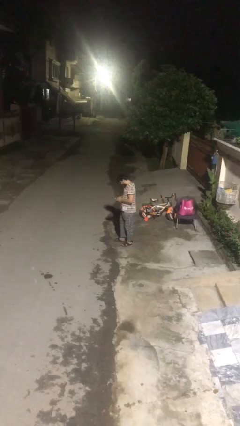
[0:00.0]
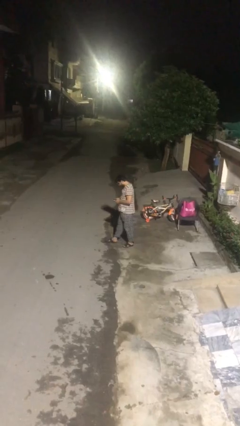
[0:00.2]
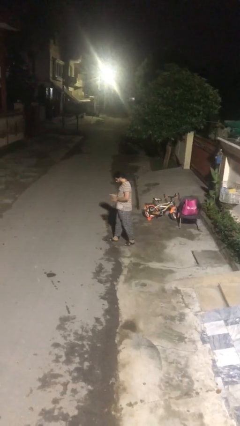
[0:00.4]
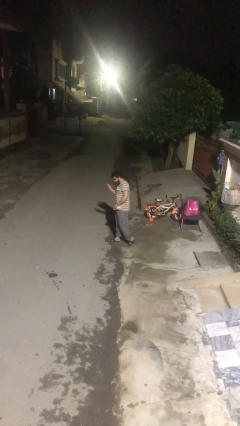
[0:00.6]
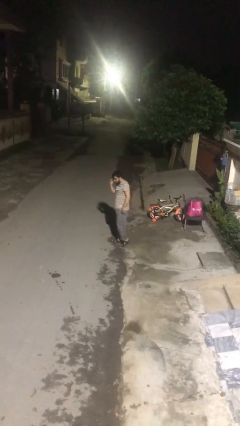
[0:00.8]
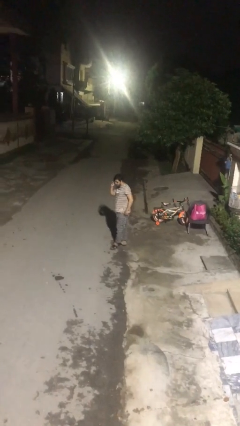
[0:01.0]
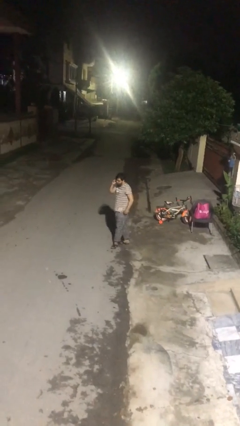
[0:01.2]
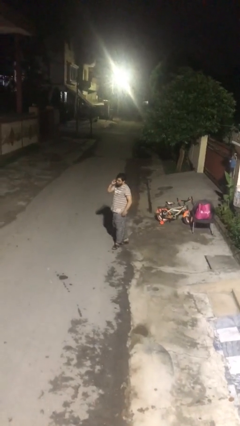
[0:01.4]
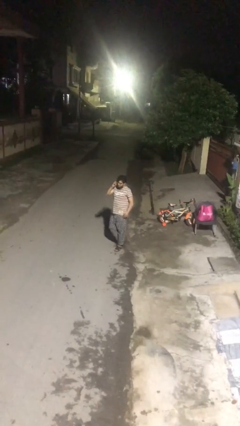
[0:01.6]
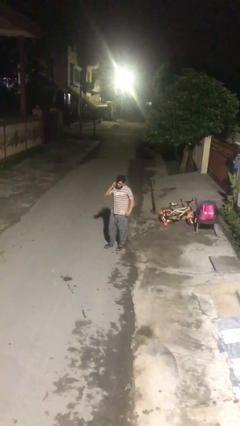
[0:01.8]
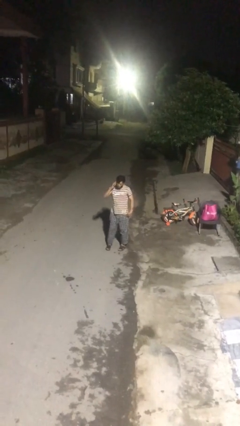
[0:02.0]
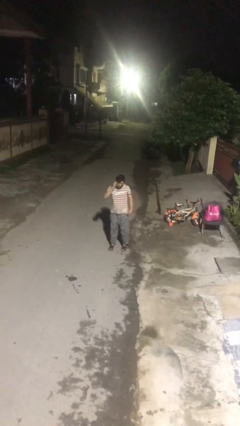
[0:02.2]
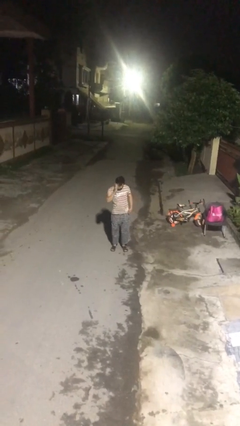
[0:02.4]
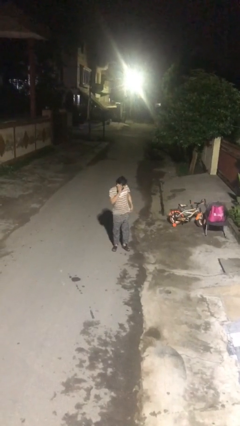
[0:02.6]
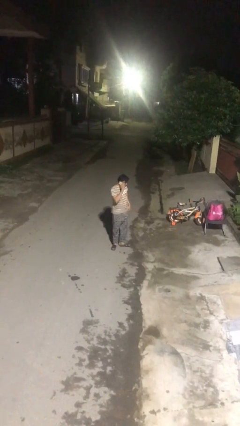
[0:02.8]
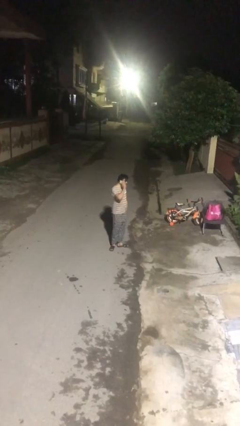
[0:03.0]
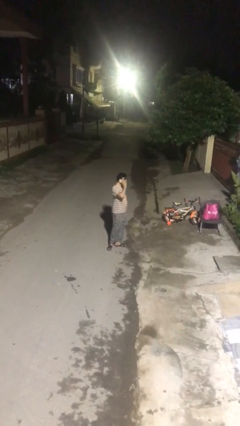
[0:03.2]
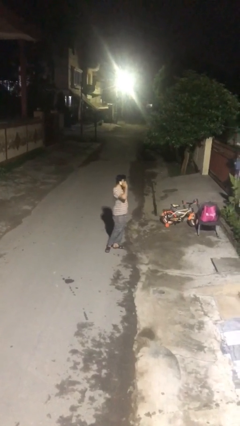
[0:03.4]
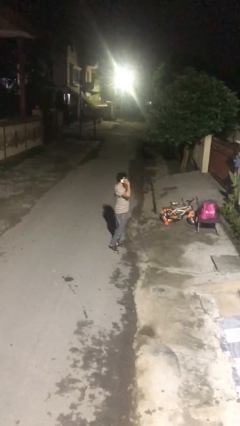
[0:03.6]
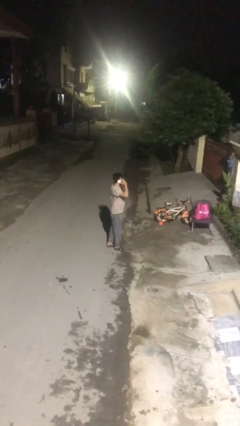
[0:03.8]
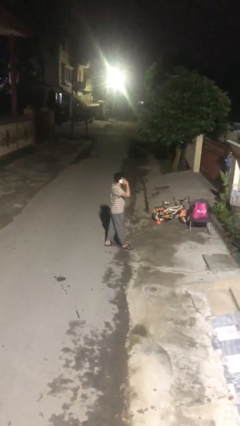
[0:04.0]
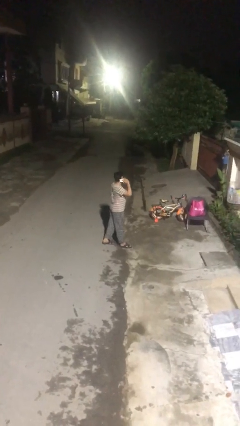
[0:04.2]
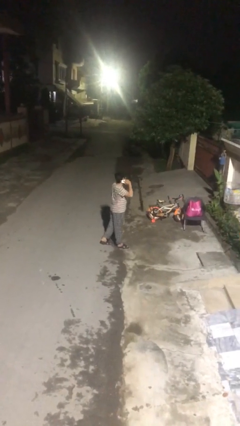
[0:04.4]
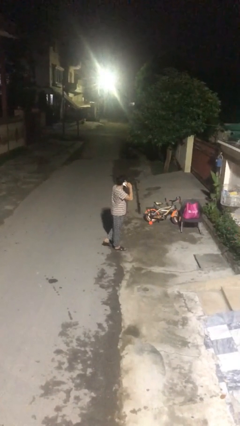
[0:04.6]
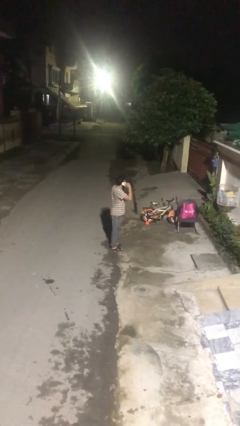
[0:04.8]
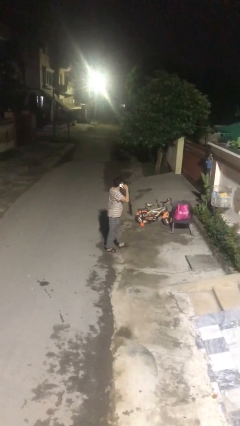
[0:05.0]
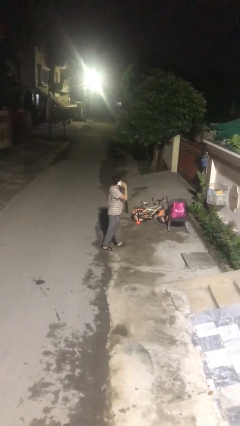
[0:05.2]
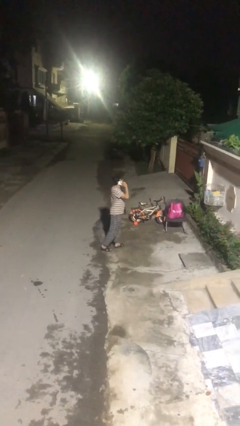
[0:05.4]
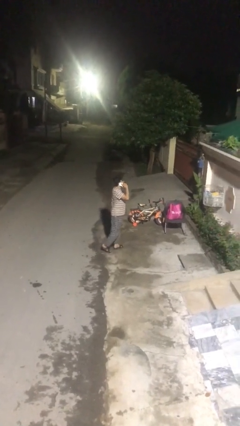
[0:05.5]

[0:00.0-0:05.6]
person talks on phone

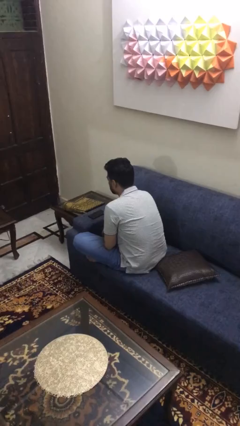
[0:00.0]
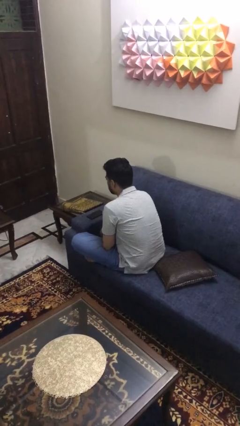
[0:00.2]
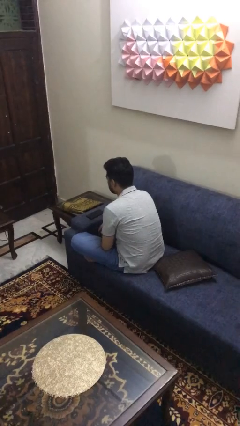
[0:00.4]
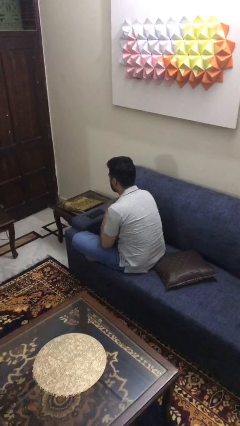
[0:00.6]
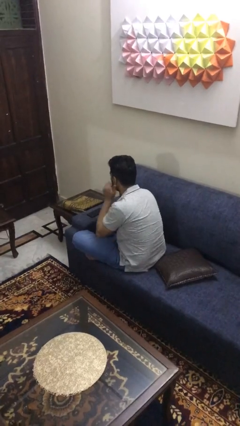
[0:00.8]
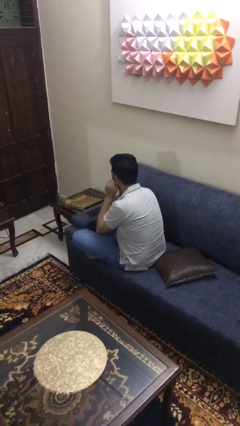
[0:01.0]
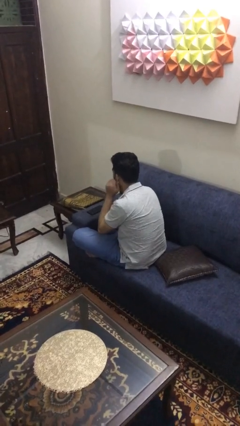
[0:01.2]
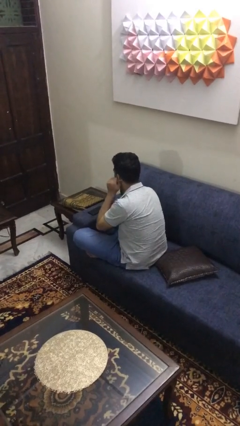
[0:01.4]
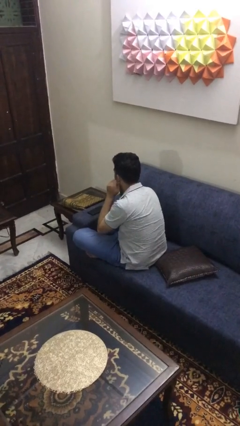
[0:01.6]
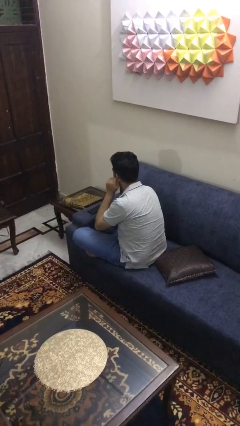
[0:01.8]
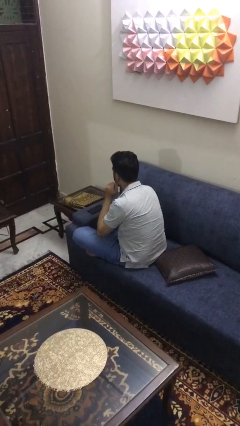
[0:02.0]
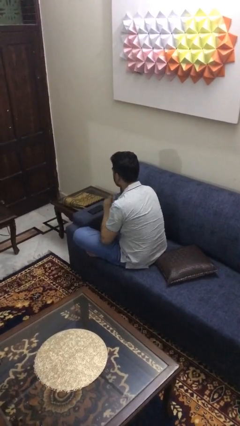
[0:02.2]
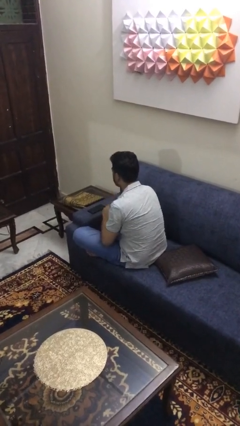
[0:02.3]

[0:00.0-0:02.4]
person touches earlobe

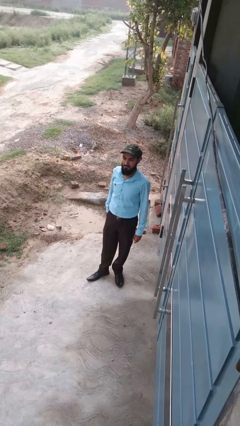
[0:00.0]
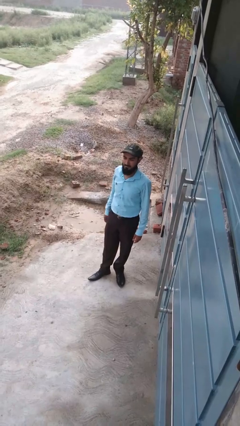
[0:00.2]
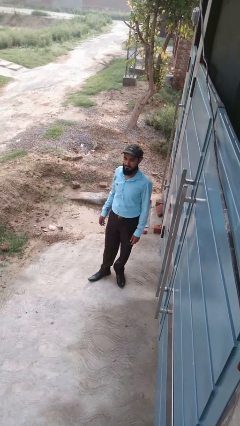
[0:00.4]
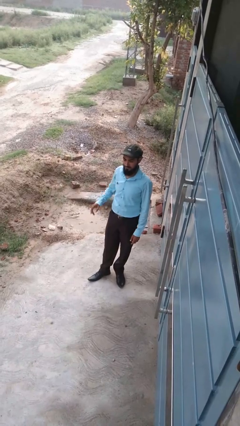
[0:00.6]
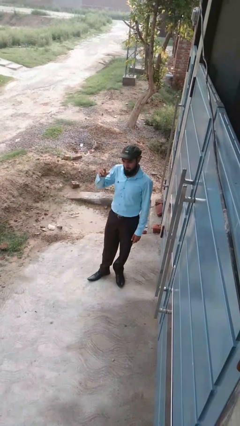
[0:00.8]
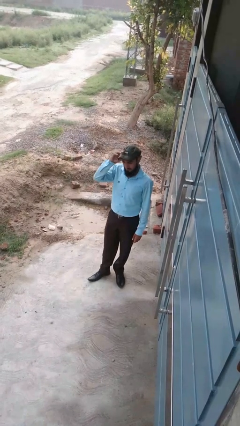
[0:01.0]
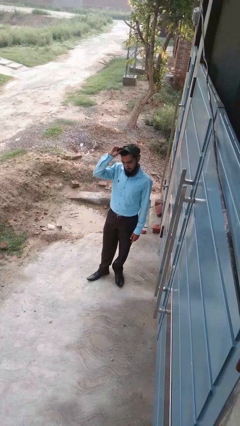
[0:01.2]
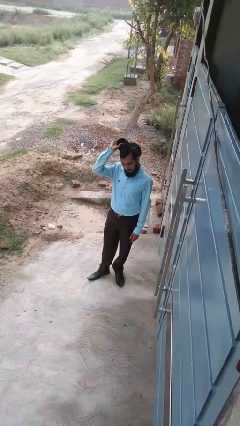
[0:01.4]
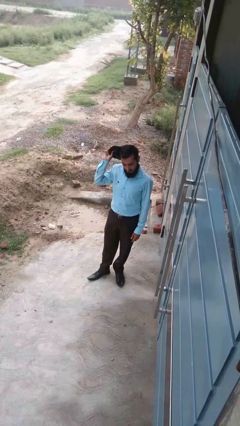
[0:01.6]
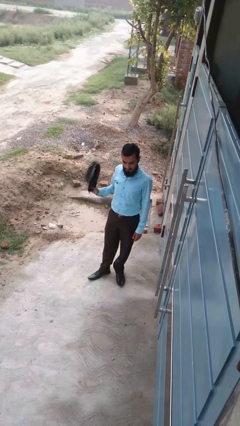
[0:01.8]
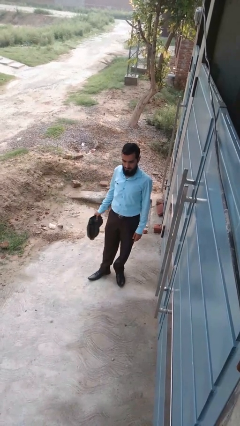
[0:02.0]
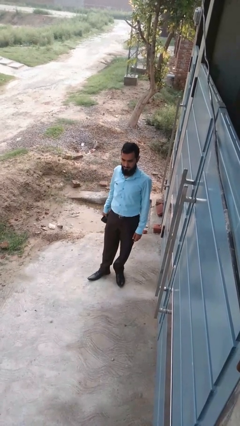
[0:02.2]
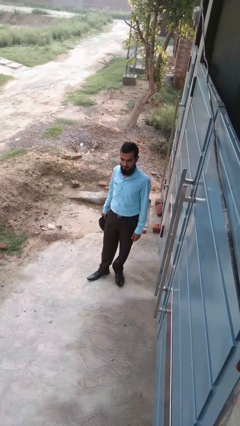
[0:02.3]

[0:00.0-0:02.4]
person takes off hat

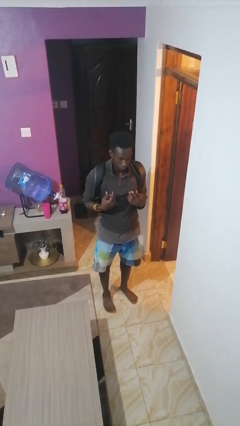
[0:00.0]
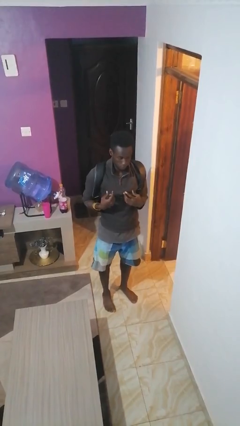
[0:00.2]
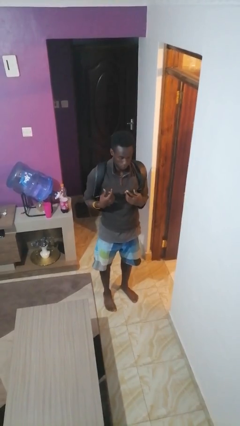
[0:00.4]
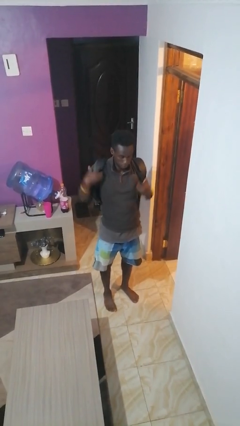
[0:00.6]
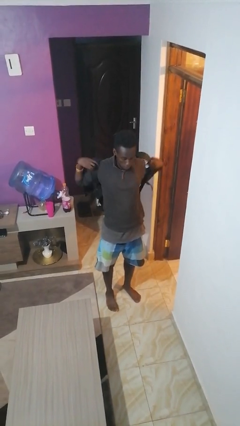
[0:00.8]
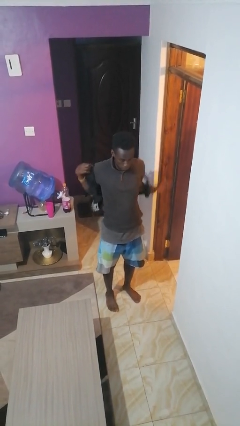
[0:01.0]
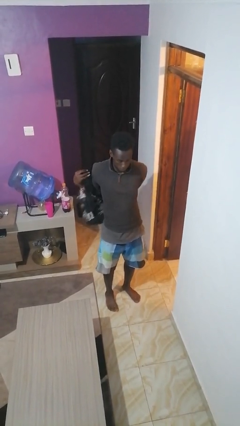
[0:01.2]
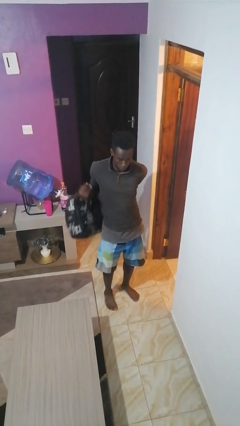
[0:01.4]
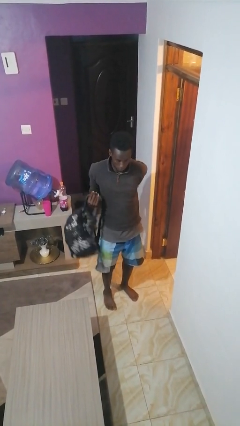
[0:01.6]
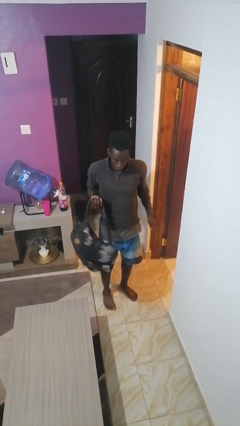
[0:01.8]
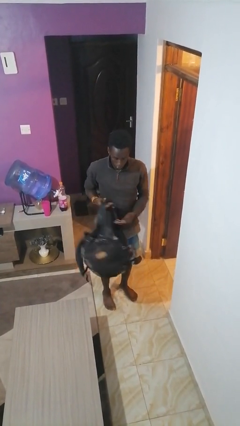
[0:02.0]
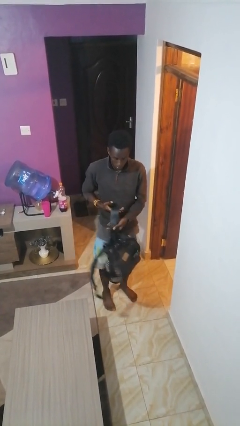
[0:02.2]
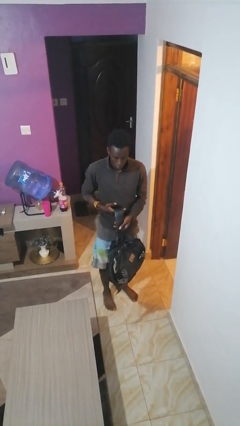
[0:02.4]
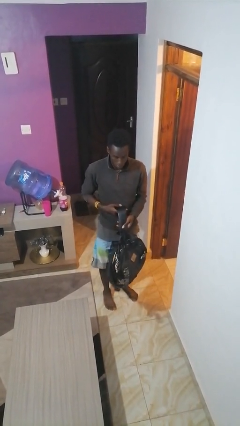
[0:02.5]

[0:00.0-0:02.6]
person takes off backpack

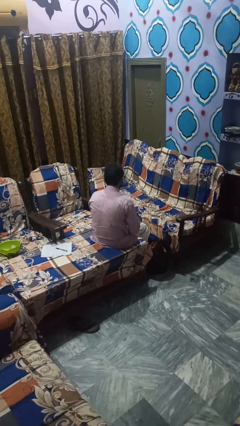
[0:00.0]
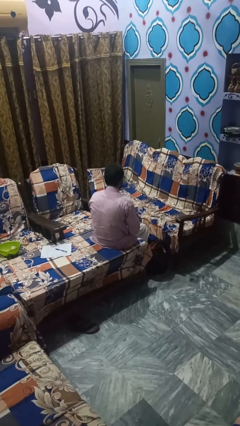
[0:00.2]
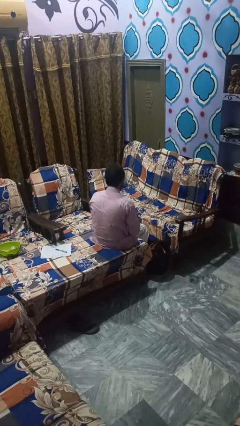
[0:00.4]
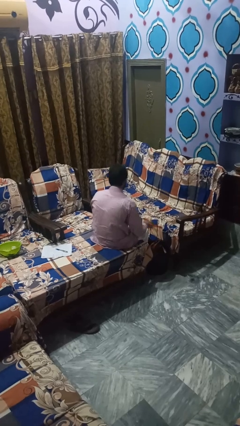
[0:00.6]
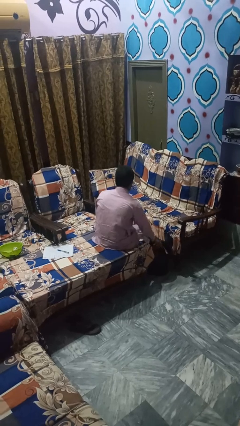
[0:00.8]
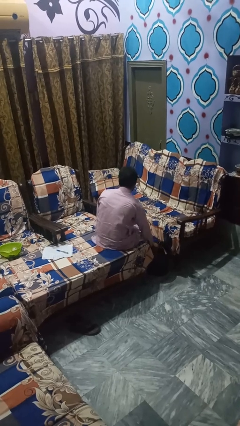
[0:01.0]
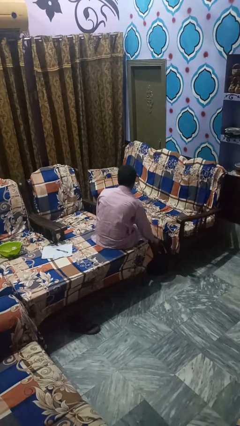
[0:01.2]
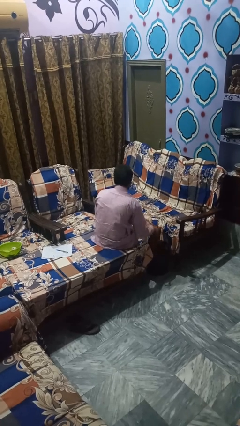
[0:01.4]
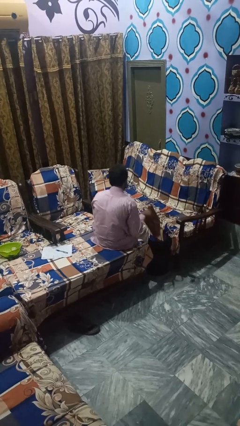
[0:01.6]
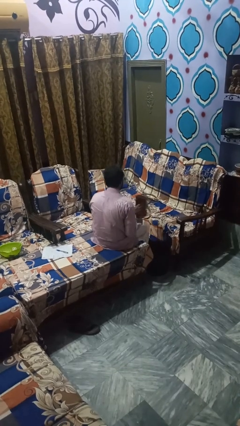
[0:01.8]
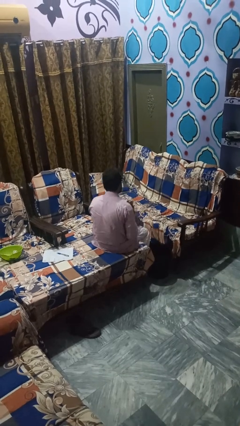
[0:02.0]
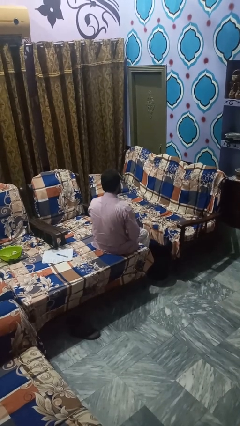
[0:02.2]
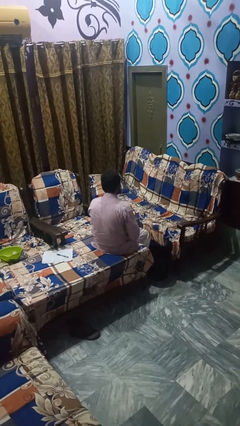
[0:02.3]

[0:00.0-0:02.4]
person takes object from basket

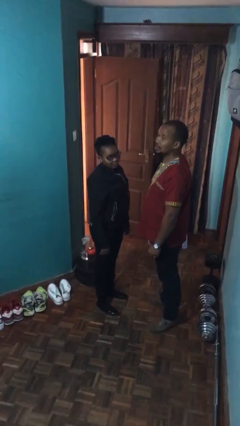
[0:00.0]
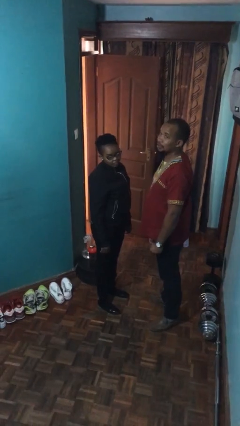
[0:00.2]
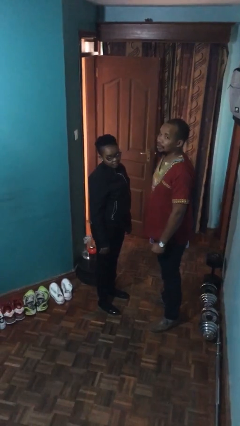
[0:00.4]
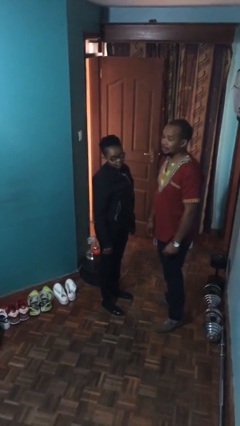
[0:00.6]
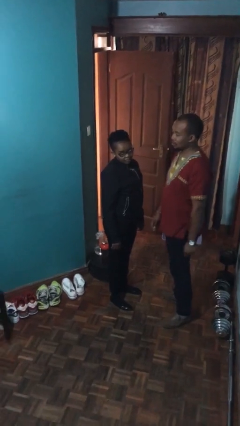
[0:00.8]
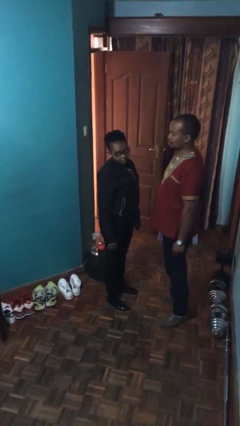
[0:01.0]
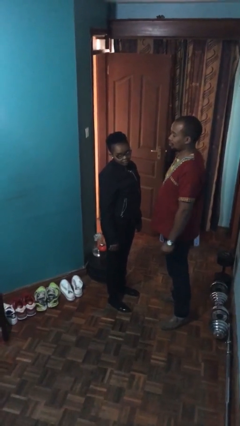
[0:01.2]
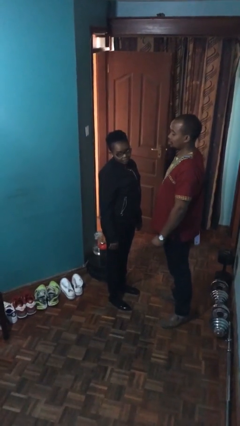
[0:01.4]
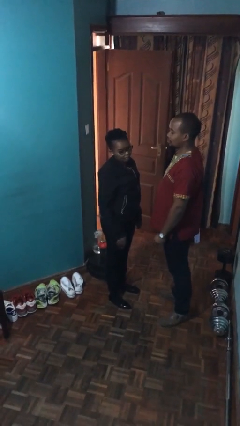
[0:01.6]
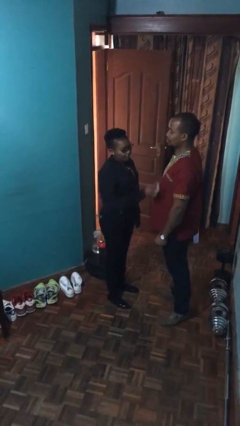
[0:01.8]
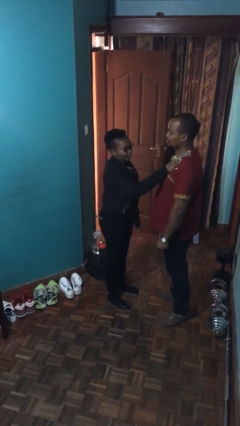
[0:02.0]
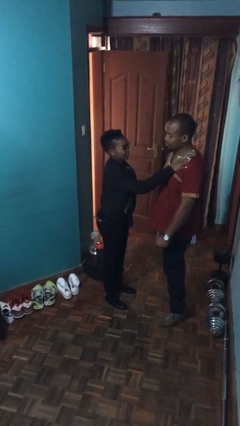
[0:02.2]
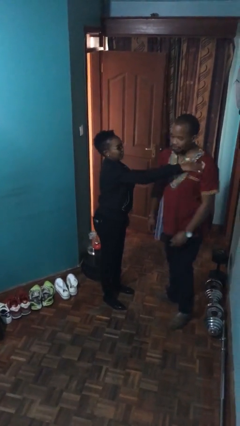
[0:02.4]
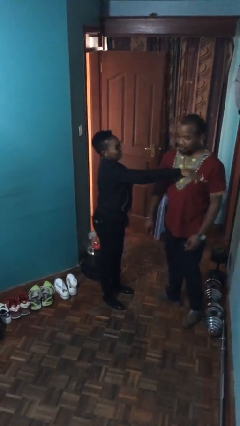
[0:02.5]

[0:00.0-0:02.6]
person shoves person
